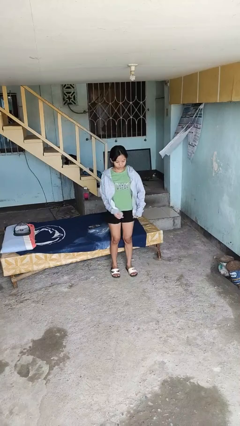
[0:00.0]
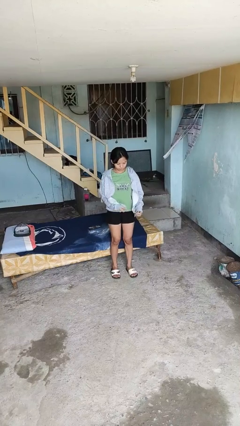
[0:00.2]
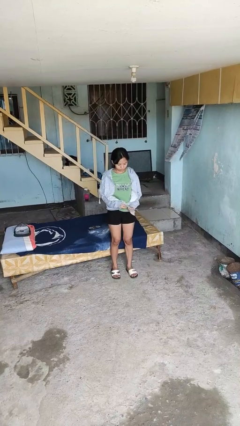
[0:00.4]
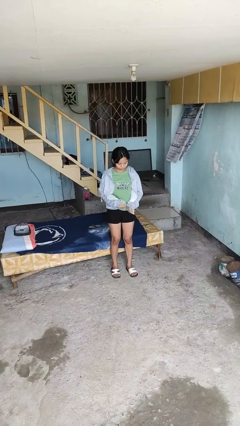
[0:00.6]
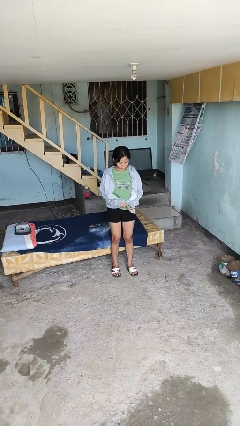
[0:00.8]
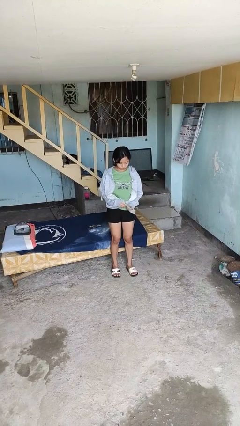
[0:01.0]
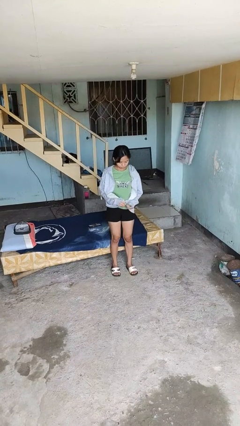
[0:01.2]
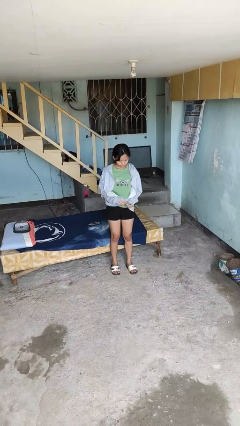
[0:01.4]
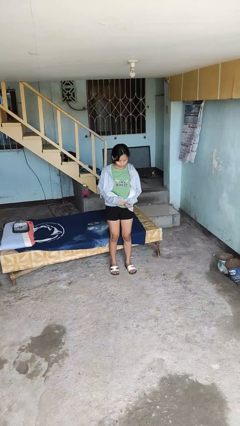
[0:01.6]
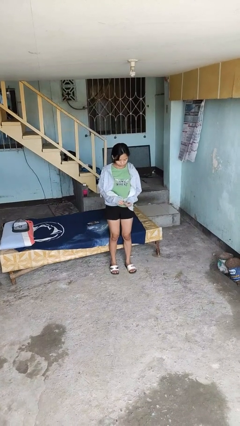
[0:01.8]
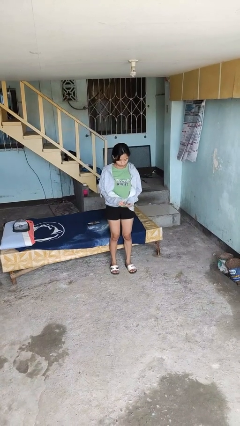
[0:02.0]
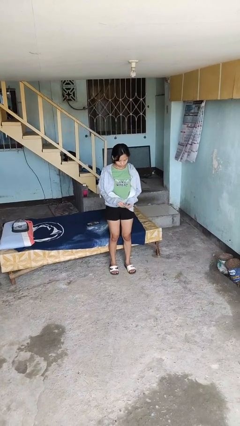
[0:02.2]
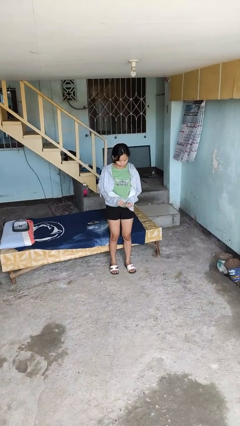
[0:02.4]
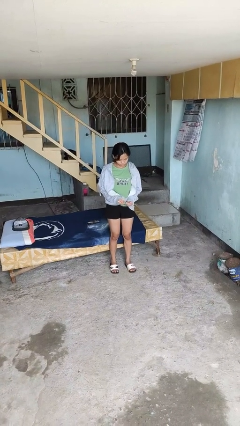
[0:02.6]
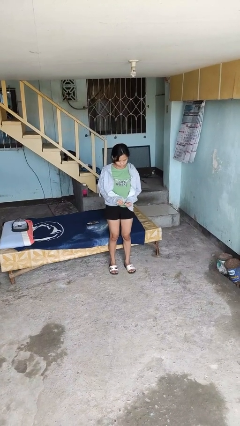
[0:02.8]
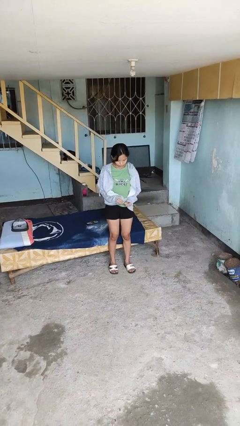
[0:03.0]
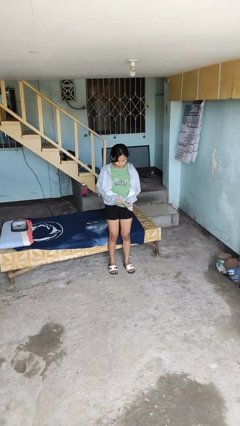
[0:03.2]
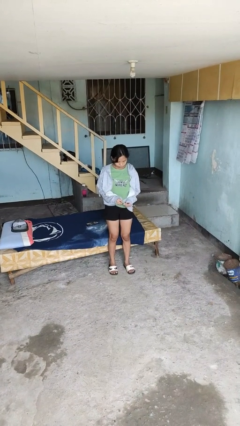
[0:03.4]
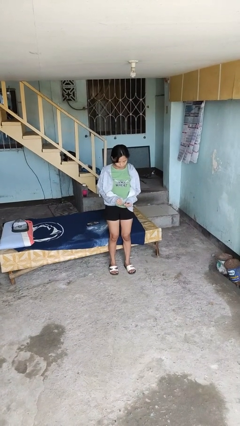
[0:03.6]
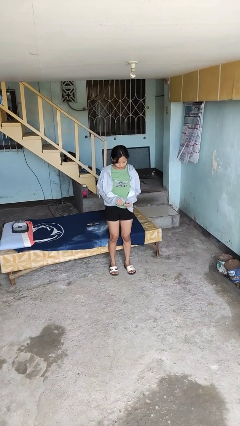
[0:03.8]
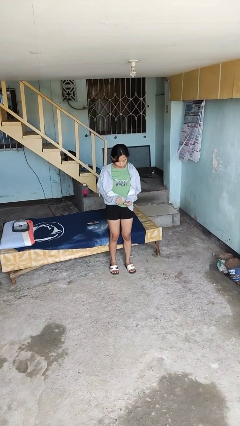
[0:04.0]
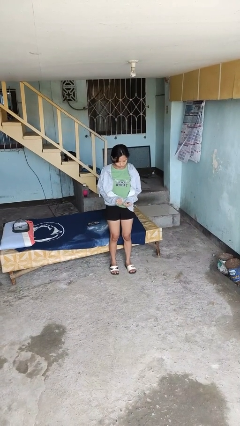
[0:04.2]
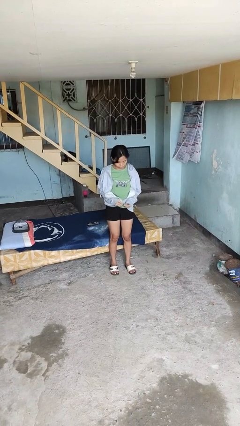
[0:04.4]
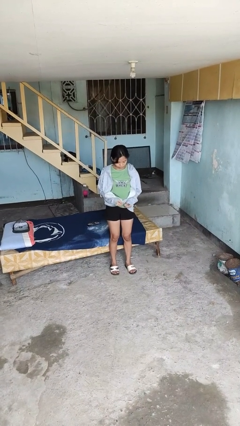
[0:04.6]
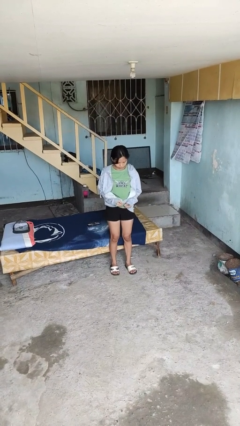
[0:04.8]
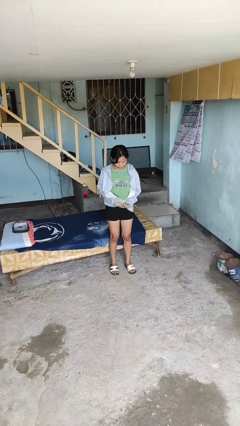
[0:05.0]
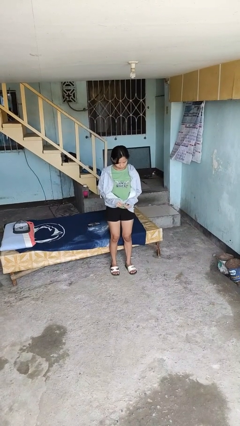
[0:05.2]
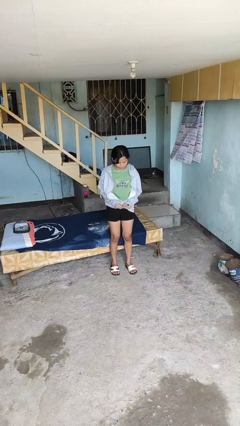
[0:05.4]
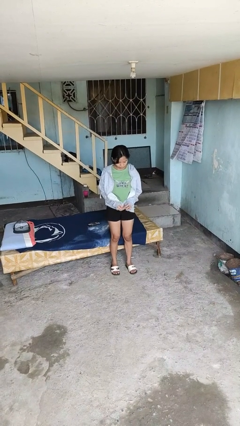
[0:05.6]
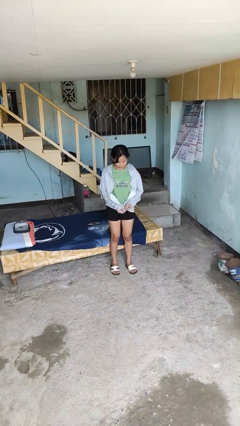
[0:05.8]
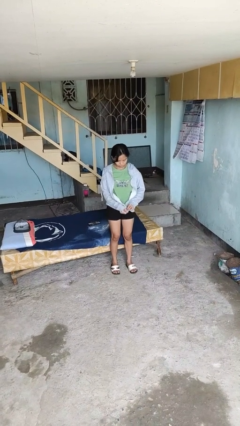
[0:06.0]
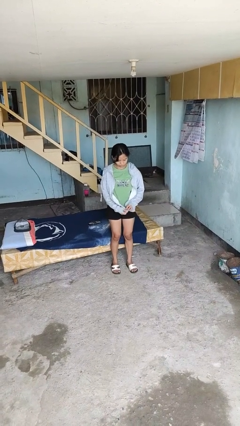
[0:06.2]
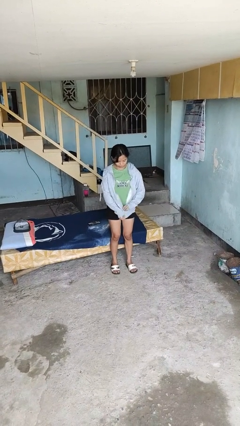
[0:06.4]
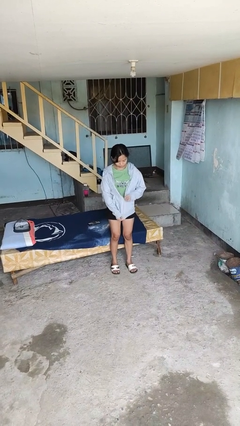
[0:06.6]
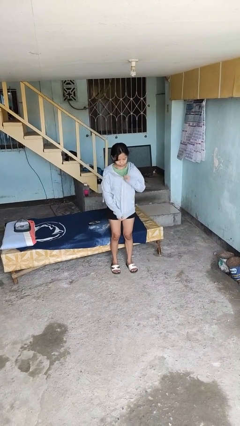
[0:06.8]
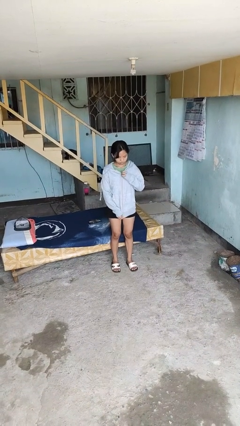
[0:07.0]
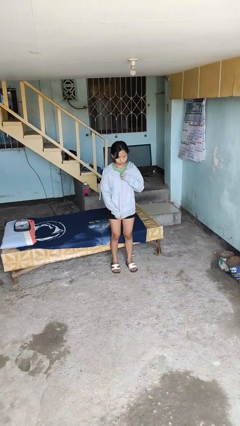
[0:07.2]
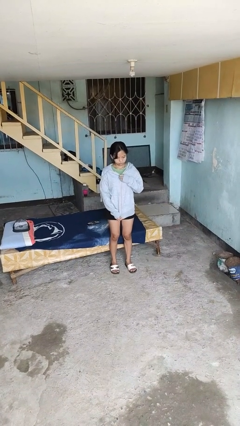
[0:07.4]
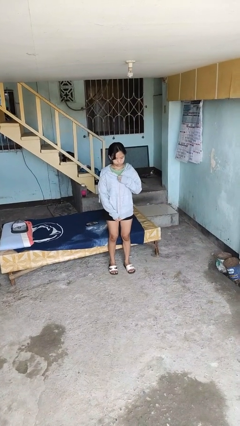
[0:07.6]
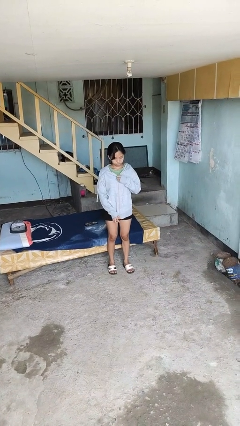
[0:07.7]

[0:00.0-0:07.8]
person zips up jacket

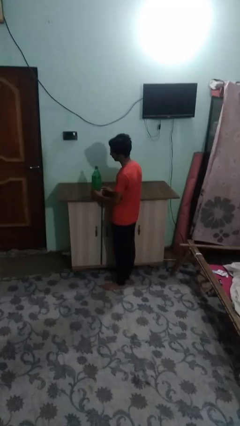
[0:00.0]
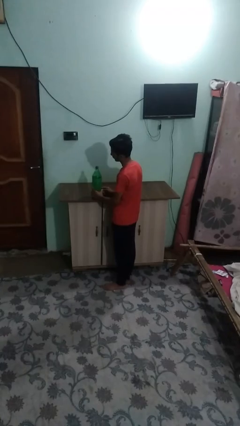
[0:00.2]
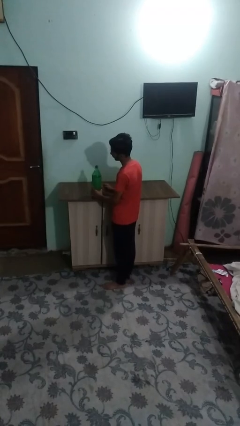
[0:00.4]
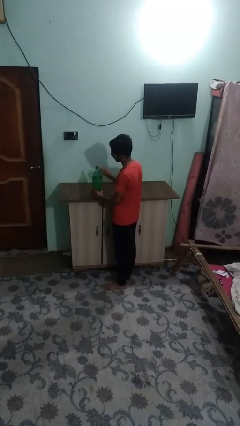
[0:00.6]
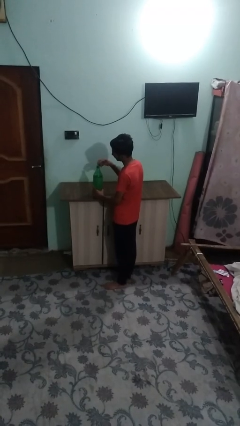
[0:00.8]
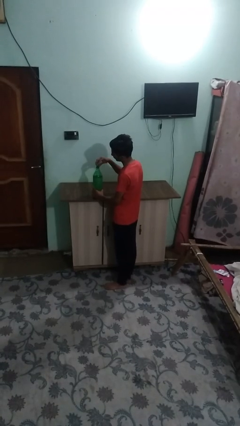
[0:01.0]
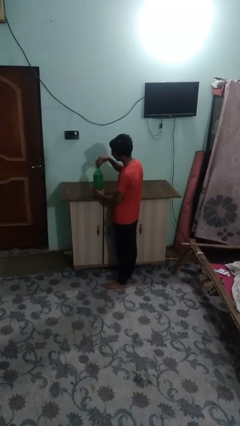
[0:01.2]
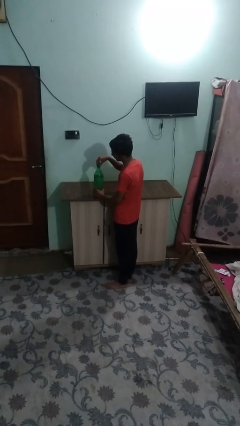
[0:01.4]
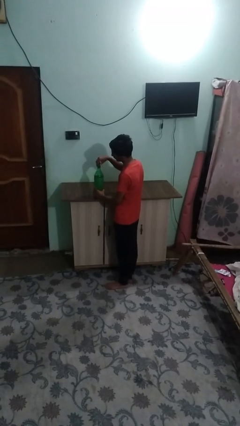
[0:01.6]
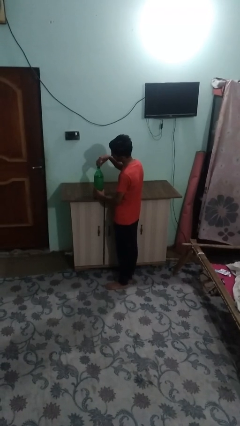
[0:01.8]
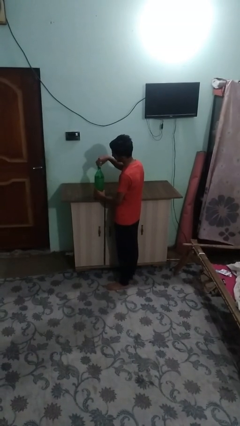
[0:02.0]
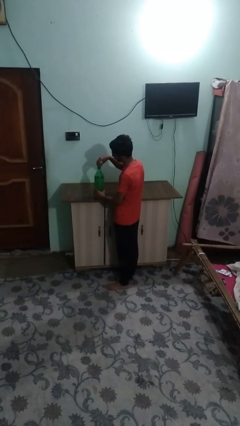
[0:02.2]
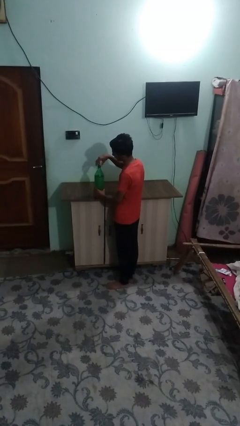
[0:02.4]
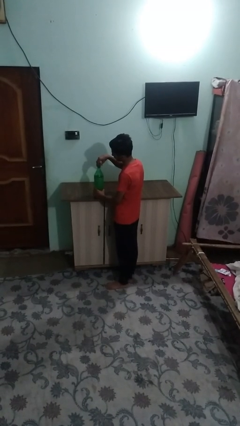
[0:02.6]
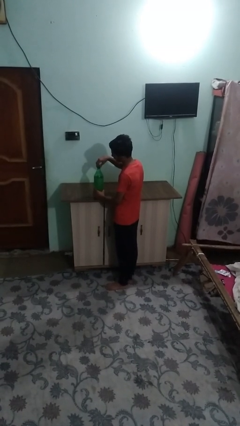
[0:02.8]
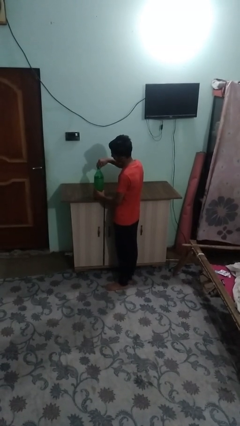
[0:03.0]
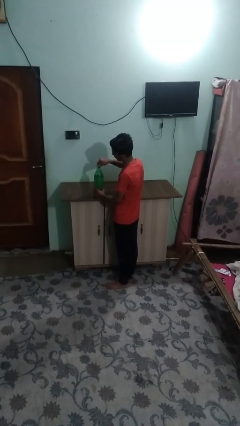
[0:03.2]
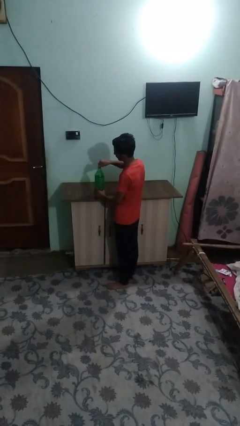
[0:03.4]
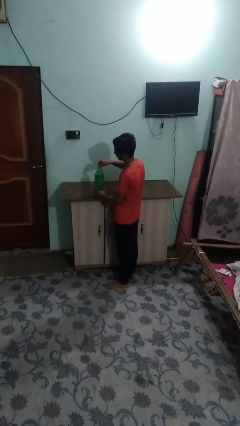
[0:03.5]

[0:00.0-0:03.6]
person screws lid to bottle

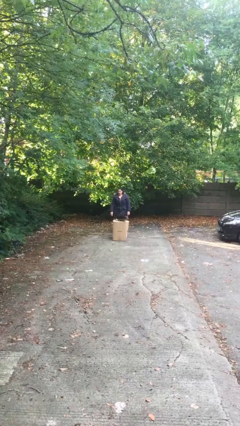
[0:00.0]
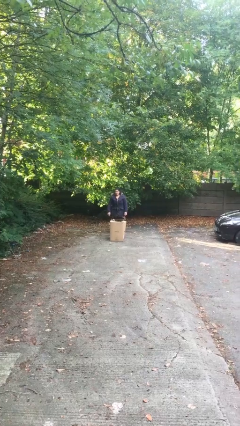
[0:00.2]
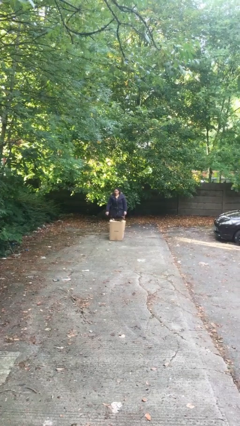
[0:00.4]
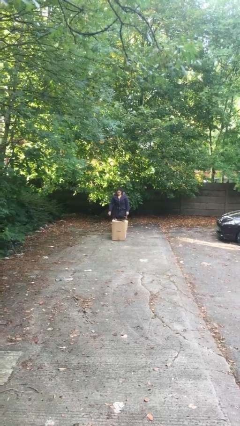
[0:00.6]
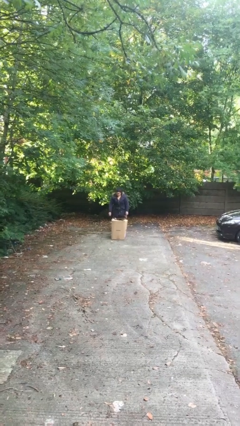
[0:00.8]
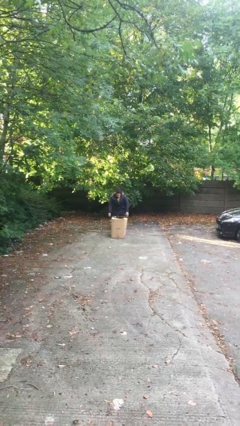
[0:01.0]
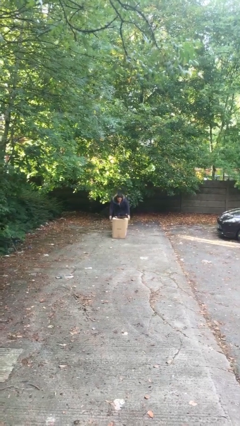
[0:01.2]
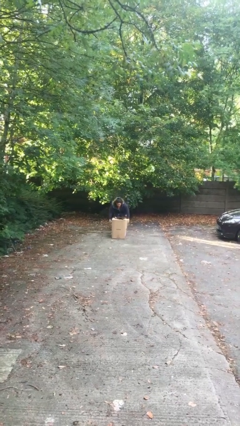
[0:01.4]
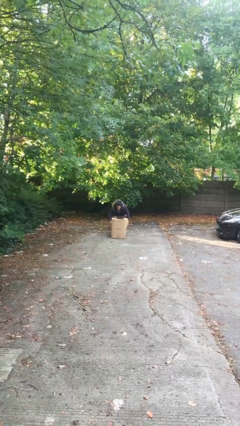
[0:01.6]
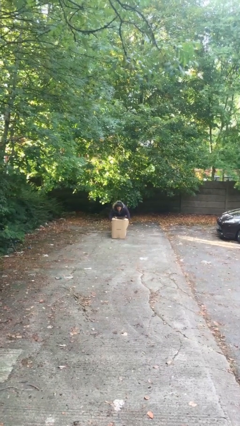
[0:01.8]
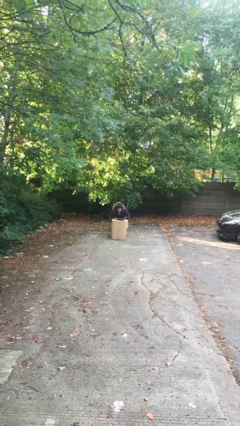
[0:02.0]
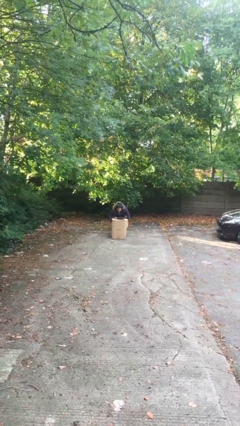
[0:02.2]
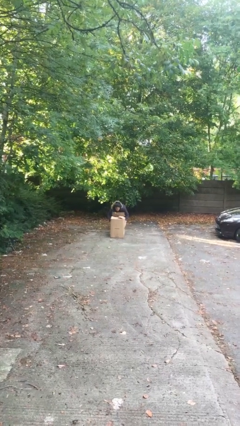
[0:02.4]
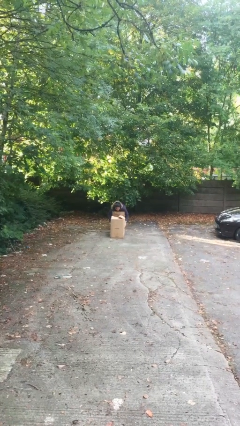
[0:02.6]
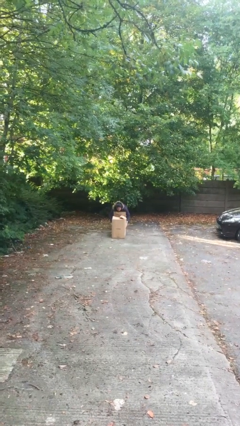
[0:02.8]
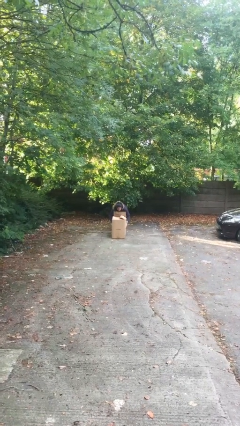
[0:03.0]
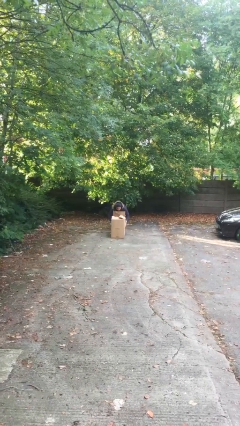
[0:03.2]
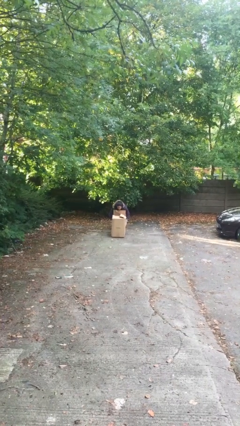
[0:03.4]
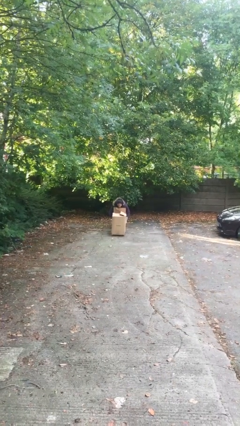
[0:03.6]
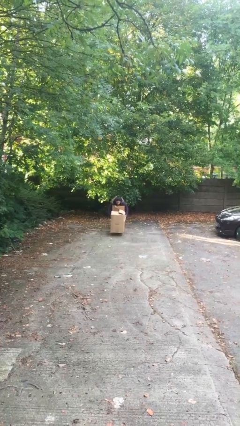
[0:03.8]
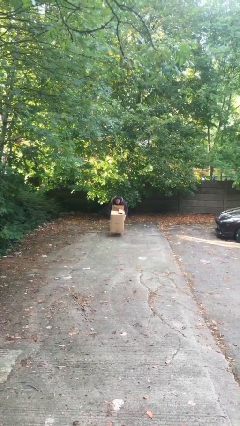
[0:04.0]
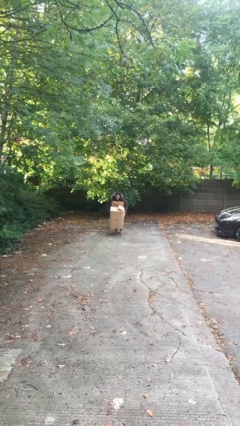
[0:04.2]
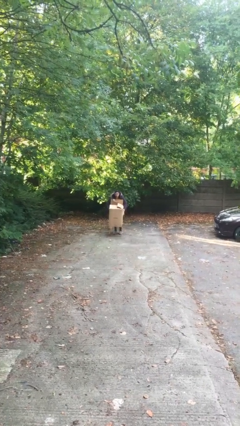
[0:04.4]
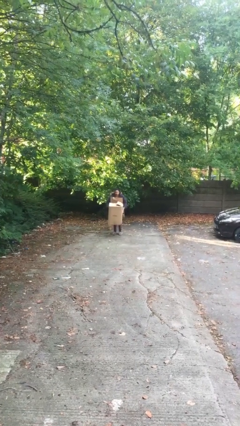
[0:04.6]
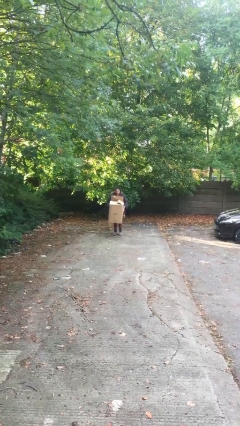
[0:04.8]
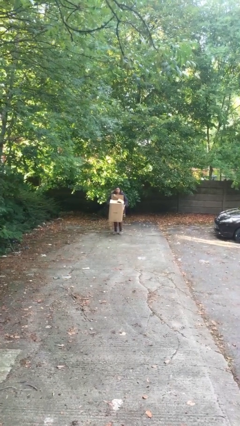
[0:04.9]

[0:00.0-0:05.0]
person picks up object from floor

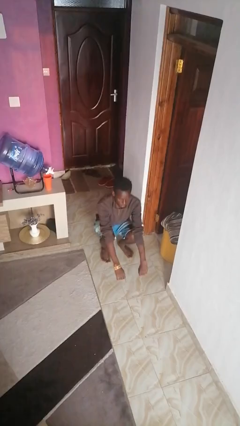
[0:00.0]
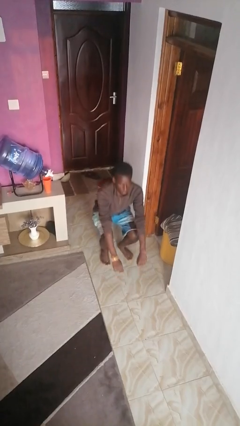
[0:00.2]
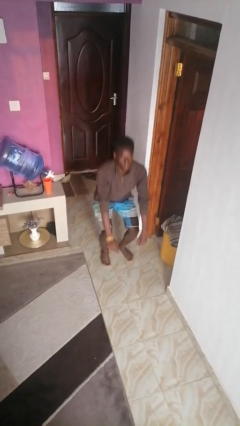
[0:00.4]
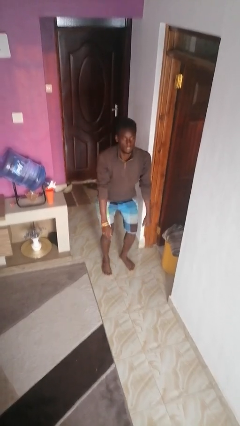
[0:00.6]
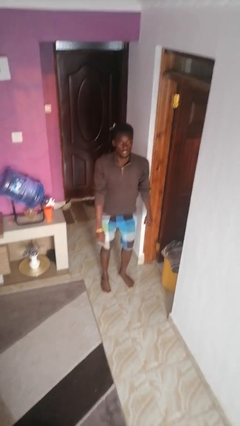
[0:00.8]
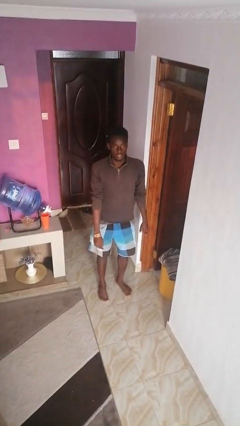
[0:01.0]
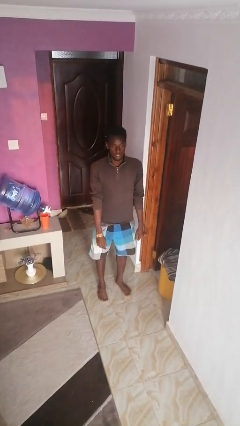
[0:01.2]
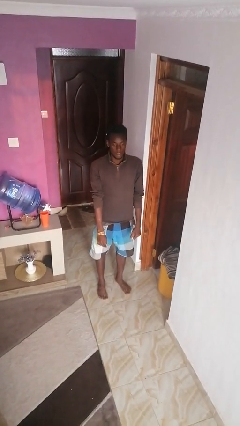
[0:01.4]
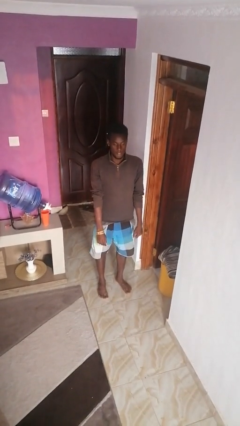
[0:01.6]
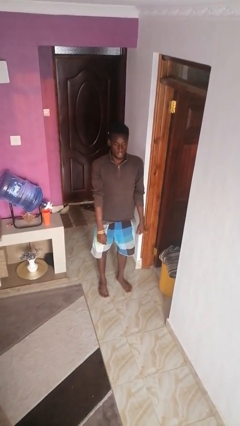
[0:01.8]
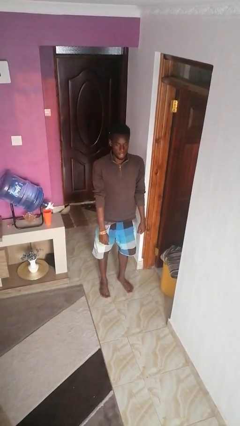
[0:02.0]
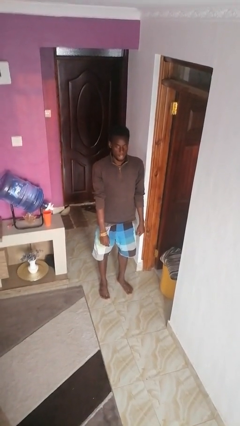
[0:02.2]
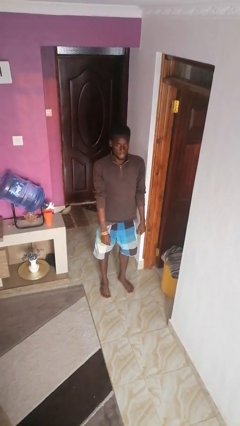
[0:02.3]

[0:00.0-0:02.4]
person stands up
